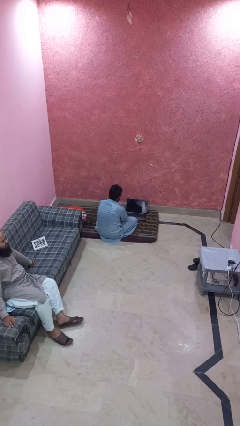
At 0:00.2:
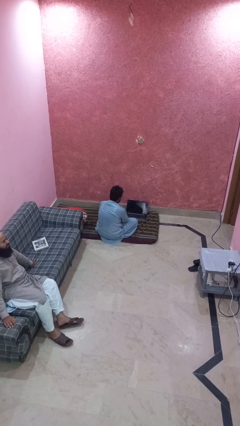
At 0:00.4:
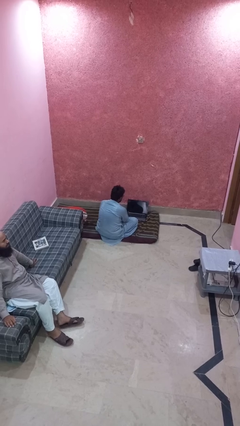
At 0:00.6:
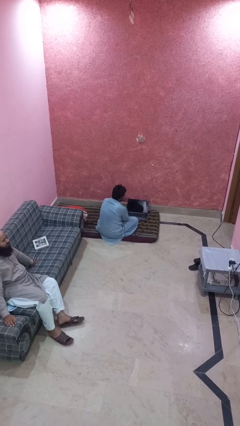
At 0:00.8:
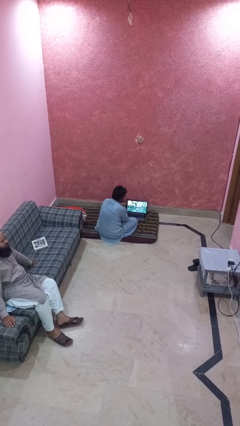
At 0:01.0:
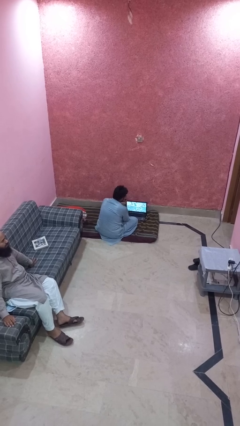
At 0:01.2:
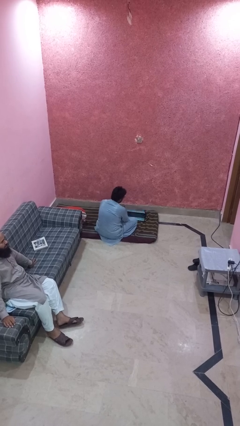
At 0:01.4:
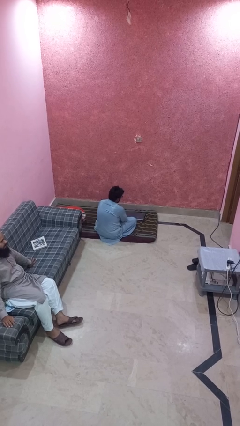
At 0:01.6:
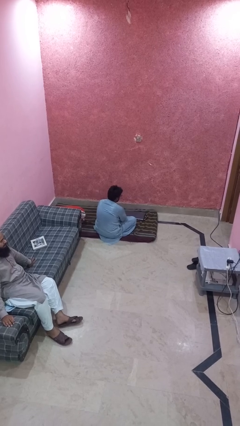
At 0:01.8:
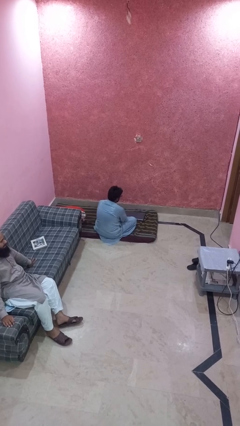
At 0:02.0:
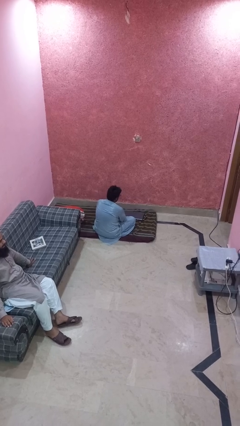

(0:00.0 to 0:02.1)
person closes laptop

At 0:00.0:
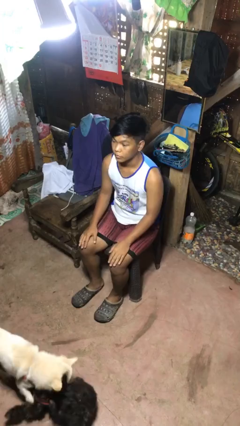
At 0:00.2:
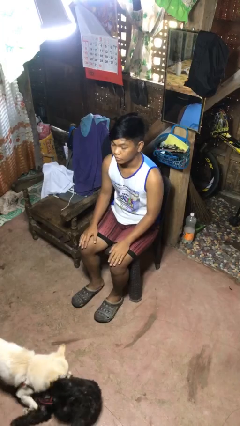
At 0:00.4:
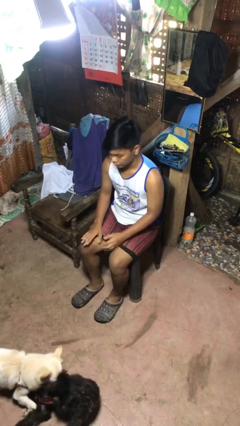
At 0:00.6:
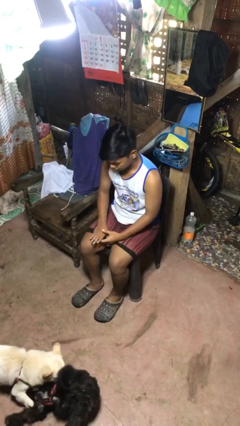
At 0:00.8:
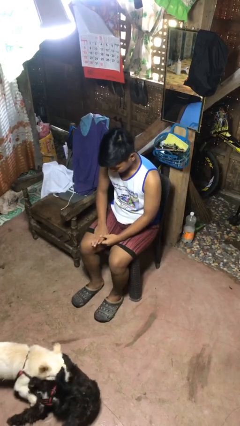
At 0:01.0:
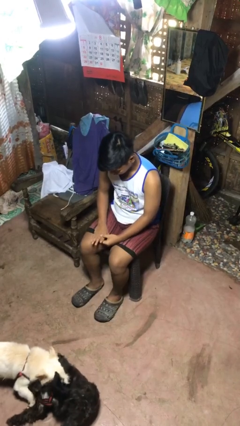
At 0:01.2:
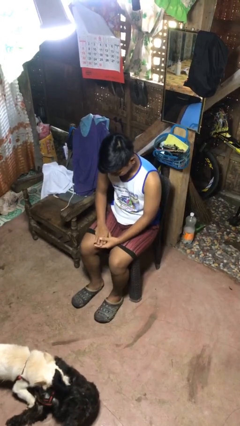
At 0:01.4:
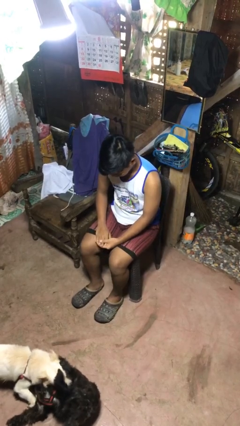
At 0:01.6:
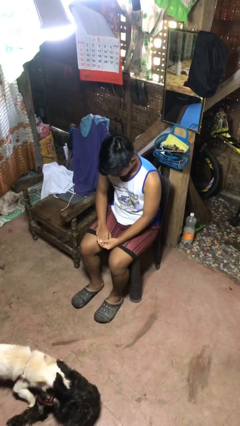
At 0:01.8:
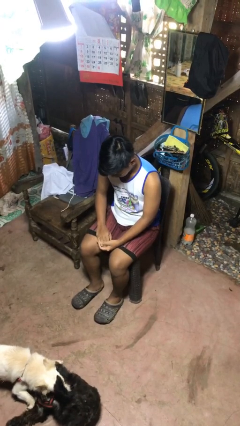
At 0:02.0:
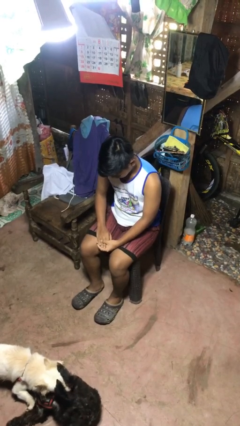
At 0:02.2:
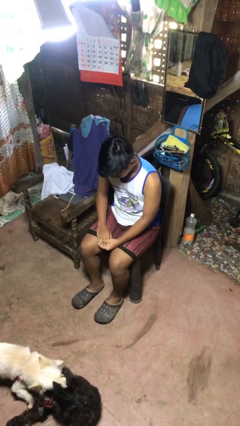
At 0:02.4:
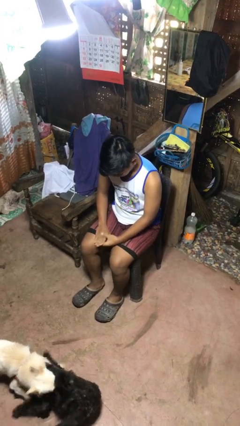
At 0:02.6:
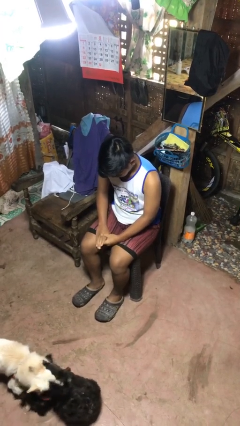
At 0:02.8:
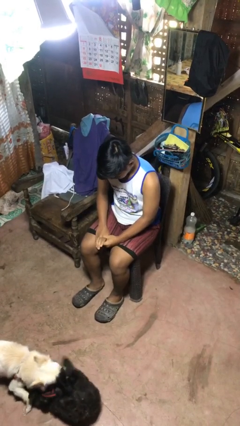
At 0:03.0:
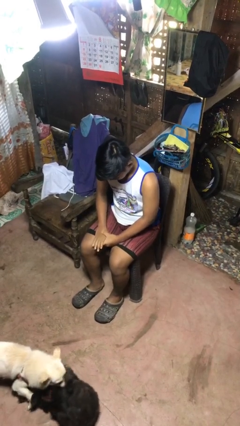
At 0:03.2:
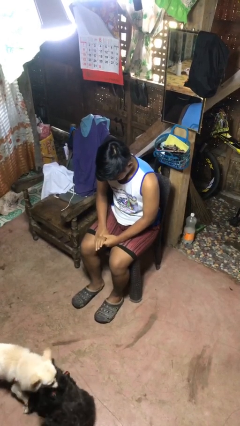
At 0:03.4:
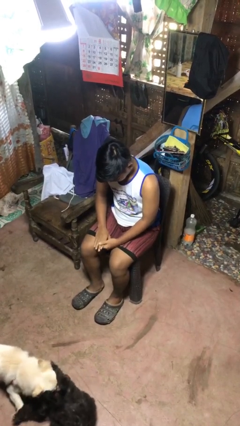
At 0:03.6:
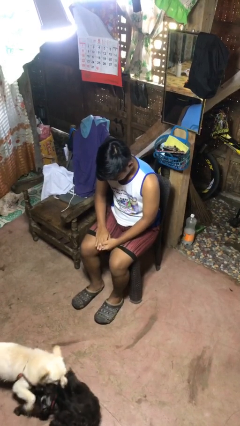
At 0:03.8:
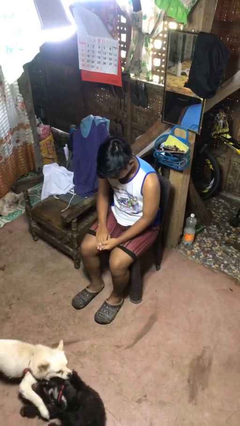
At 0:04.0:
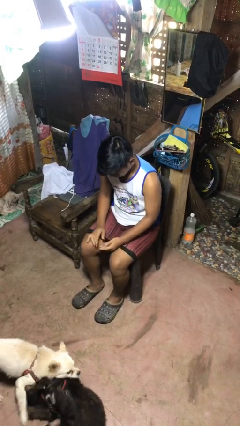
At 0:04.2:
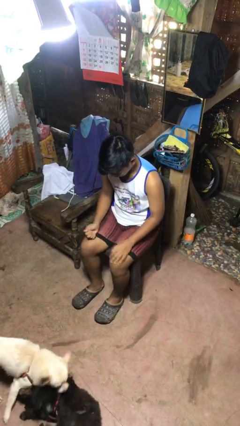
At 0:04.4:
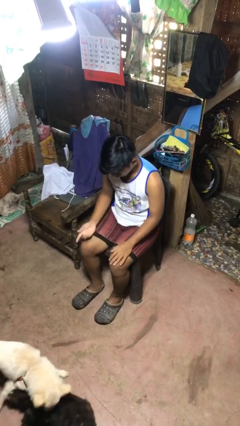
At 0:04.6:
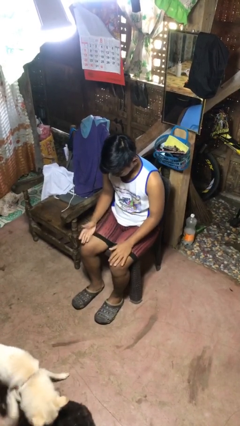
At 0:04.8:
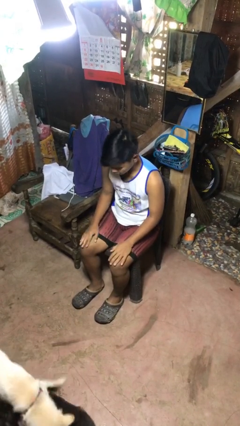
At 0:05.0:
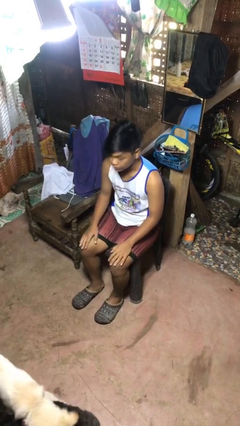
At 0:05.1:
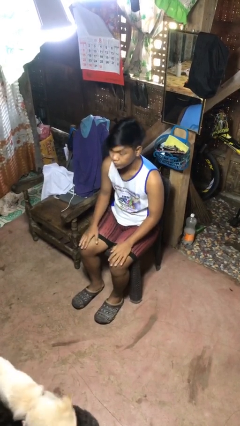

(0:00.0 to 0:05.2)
person looks at hands in lap

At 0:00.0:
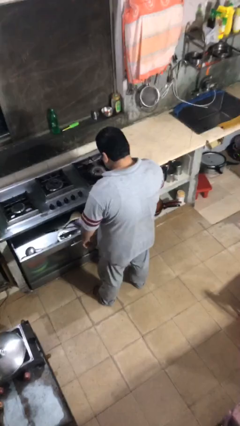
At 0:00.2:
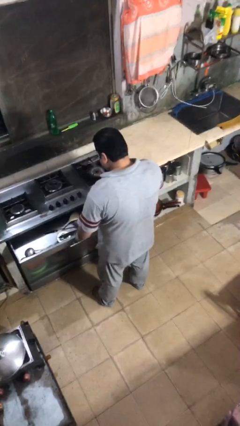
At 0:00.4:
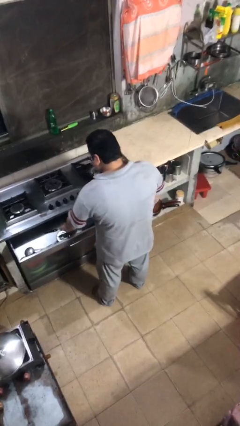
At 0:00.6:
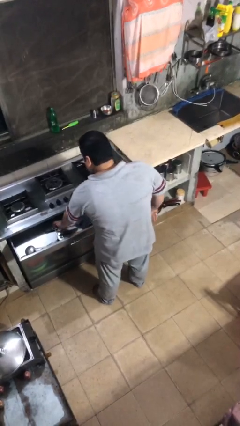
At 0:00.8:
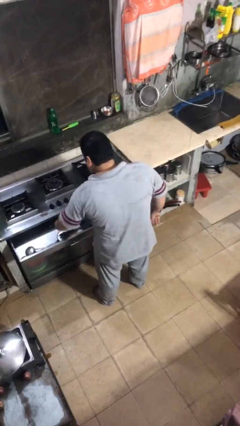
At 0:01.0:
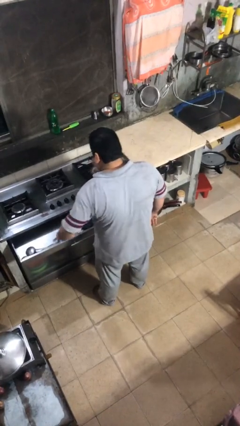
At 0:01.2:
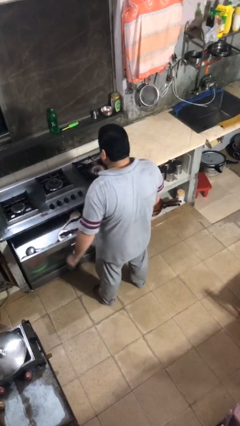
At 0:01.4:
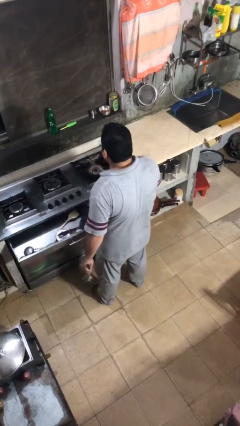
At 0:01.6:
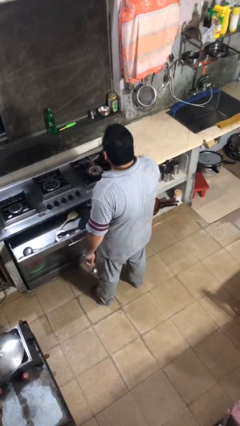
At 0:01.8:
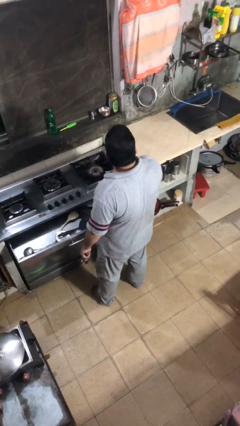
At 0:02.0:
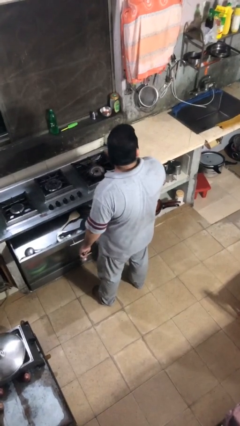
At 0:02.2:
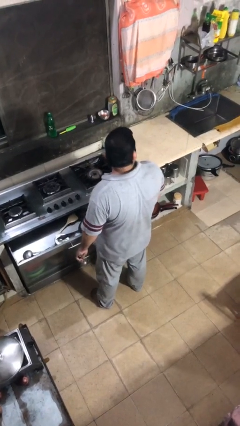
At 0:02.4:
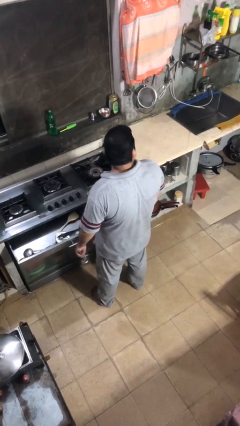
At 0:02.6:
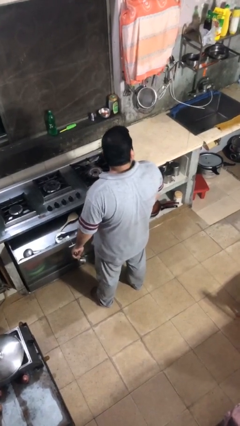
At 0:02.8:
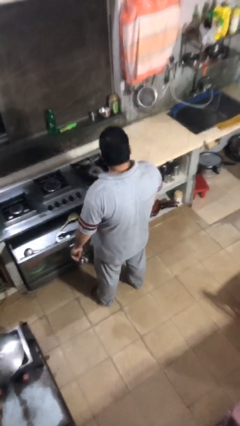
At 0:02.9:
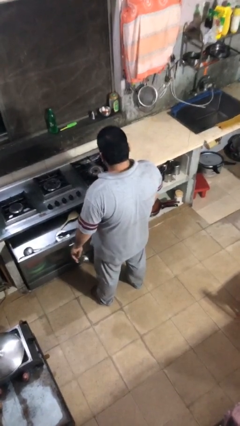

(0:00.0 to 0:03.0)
person takes object from kitchen drawer

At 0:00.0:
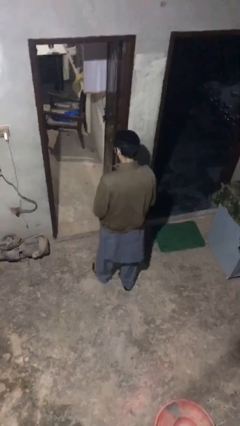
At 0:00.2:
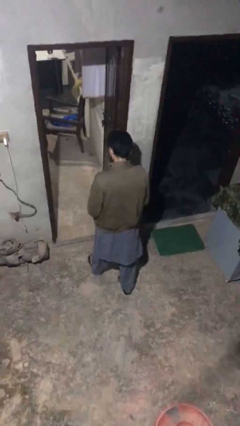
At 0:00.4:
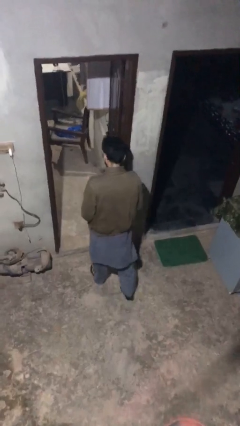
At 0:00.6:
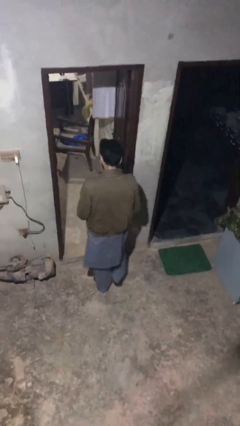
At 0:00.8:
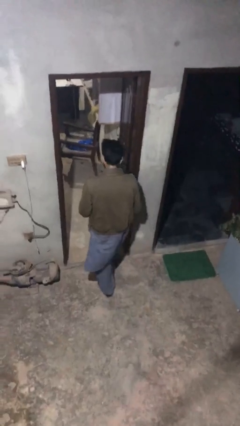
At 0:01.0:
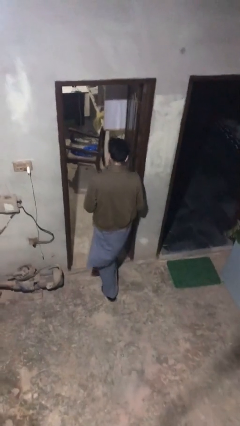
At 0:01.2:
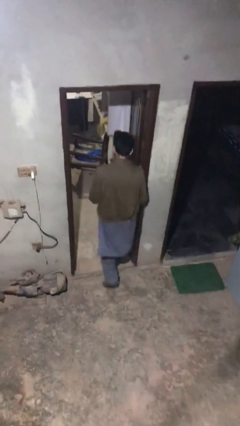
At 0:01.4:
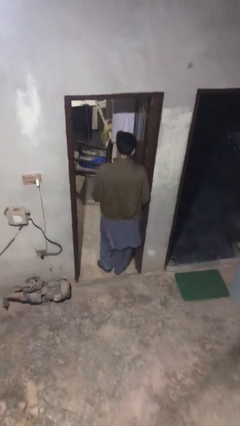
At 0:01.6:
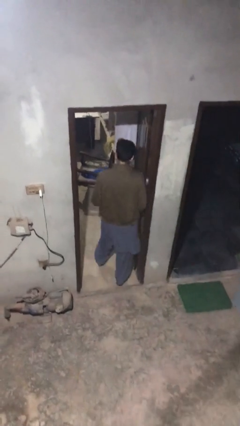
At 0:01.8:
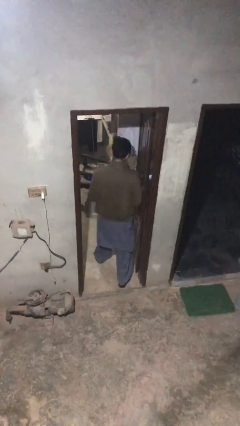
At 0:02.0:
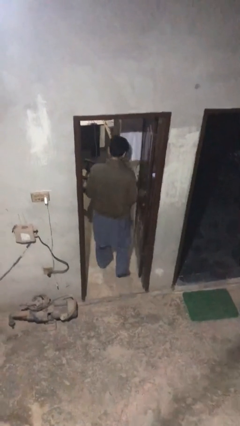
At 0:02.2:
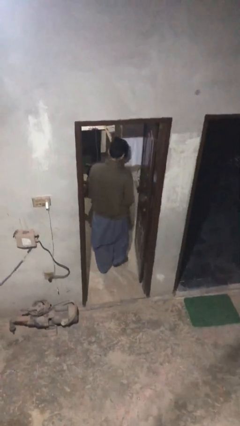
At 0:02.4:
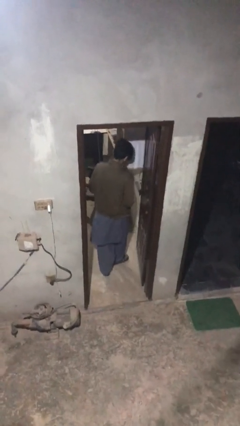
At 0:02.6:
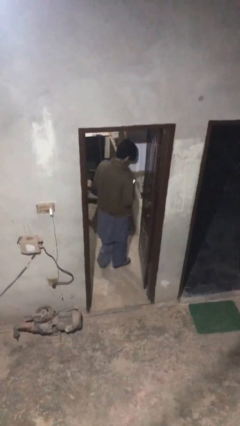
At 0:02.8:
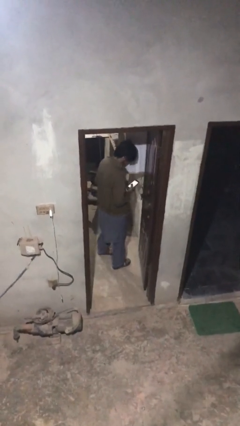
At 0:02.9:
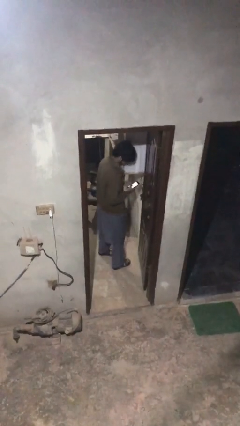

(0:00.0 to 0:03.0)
person enters scene through structure

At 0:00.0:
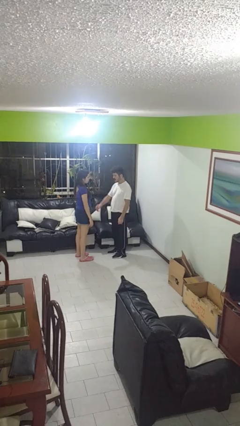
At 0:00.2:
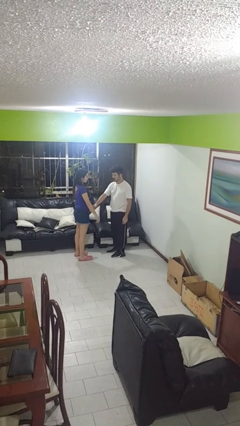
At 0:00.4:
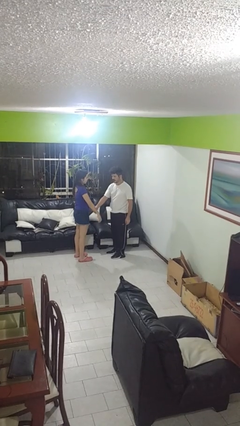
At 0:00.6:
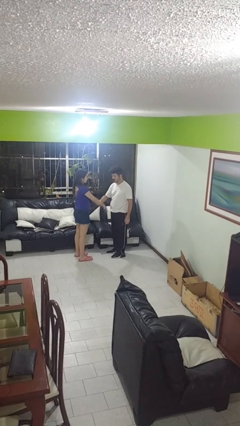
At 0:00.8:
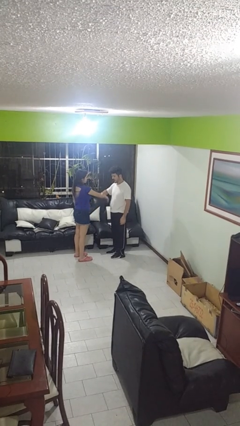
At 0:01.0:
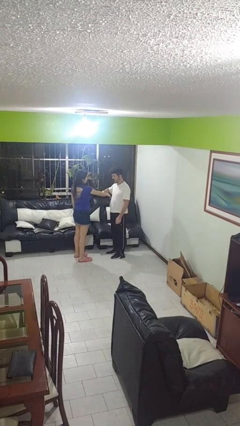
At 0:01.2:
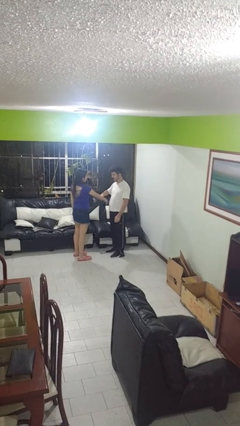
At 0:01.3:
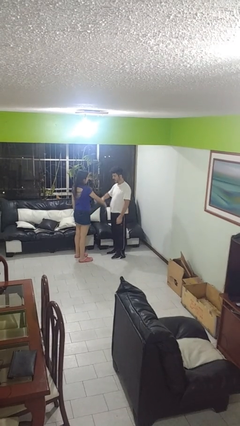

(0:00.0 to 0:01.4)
person grabs person by forearm

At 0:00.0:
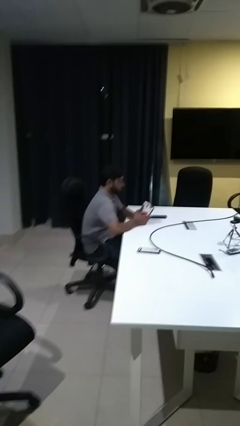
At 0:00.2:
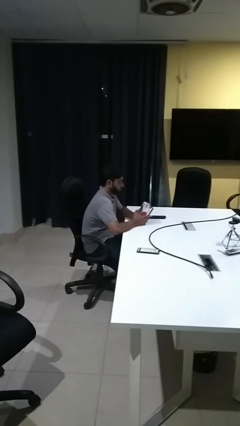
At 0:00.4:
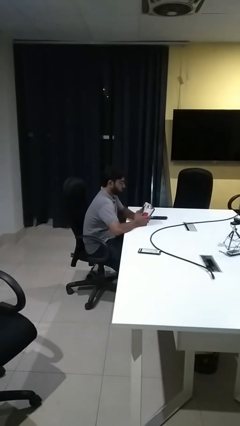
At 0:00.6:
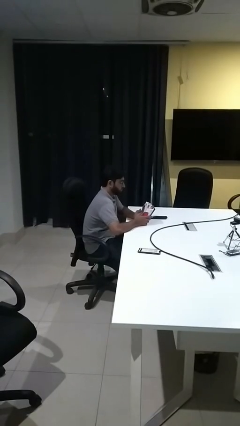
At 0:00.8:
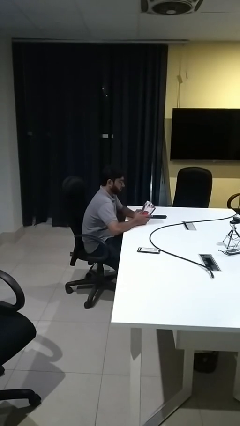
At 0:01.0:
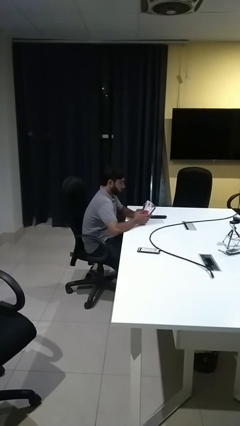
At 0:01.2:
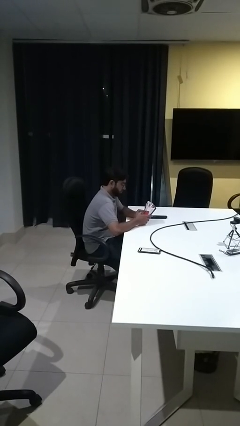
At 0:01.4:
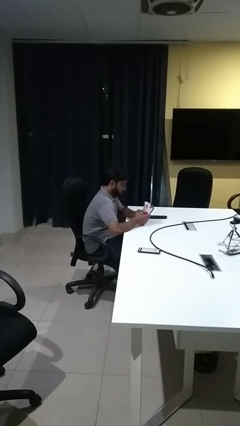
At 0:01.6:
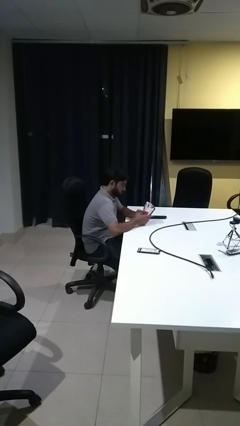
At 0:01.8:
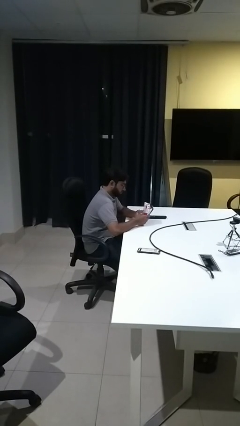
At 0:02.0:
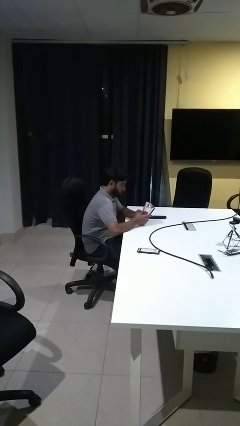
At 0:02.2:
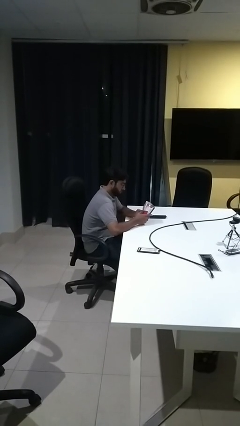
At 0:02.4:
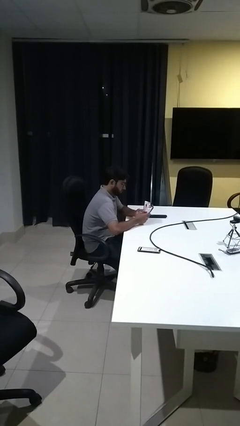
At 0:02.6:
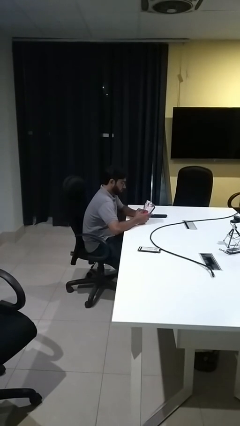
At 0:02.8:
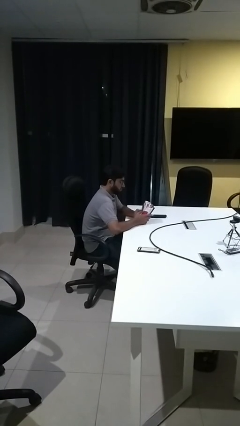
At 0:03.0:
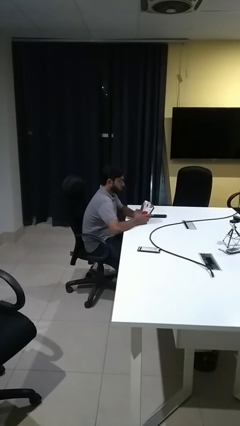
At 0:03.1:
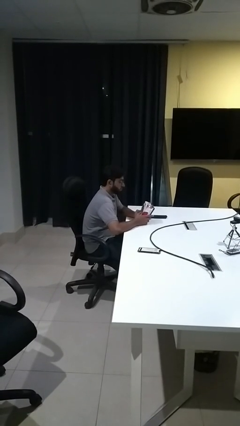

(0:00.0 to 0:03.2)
person squeezes object
